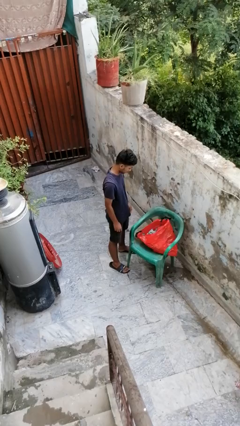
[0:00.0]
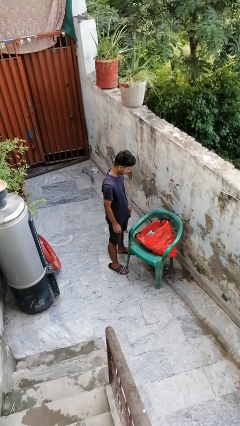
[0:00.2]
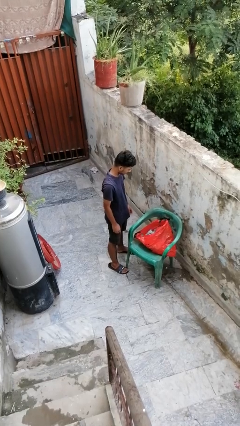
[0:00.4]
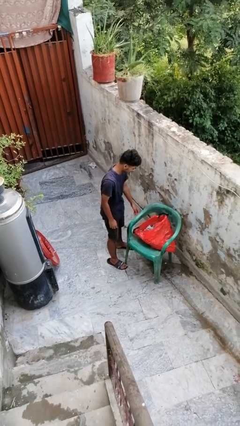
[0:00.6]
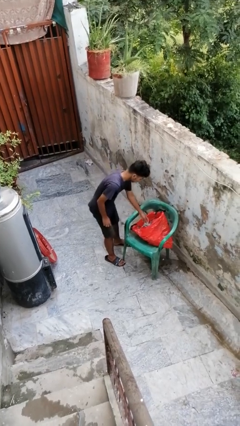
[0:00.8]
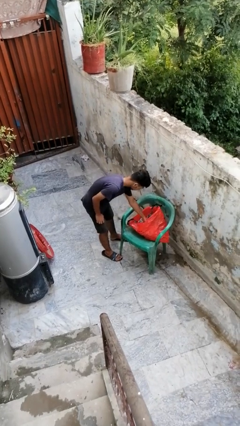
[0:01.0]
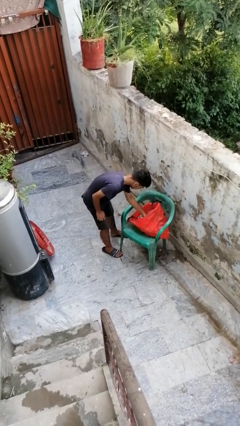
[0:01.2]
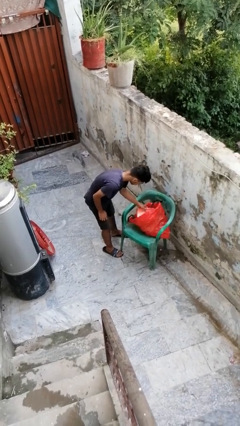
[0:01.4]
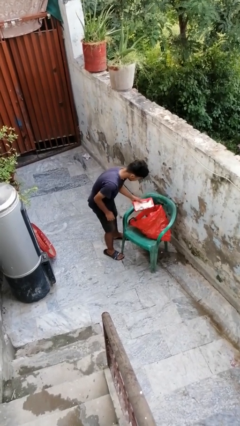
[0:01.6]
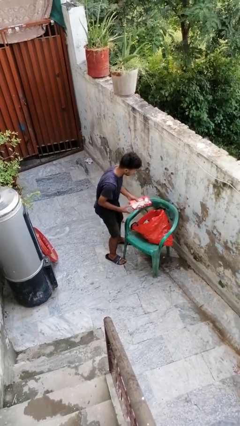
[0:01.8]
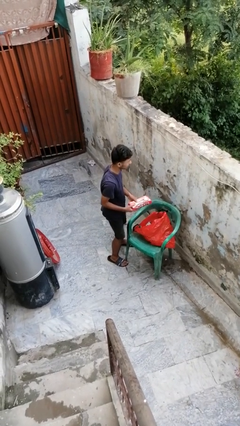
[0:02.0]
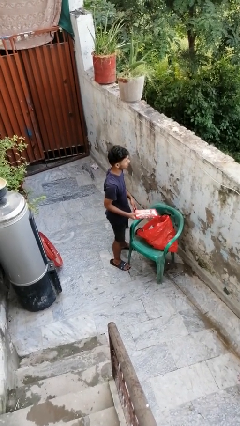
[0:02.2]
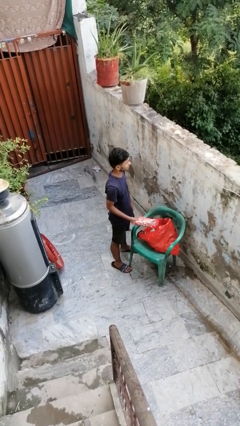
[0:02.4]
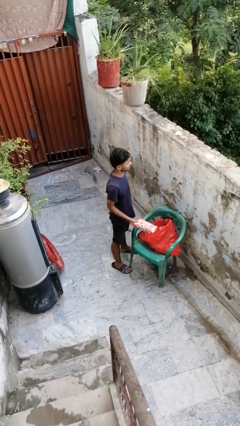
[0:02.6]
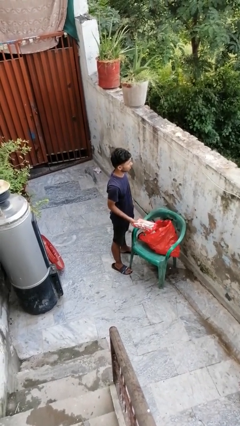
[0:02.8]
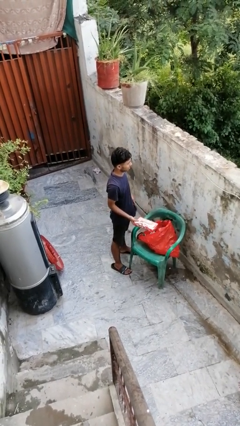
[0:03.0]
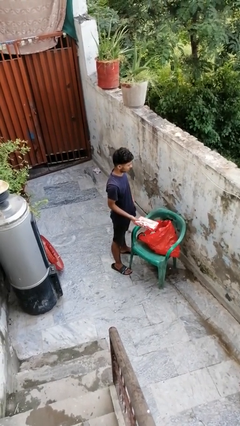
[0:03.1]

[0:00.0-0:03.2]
person takes object from bag

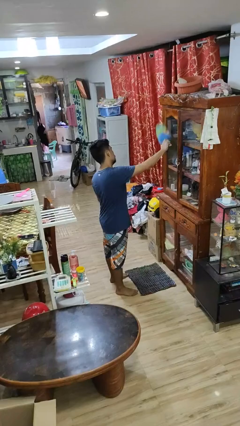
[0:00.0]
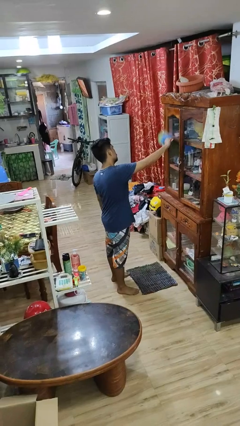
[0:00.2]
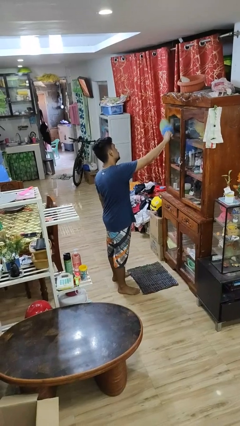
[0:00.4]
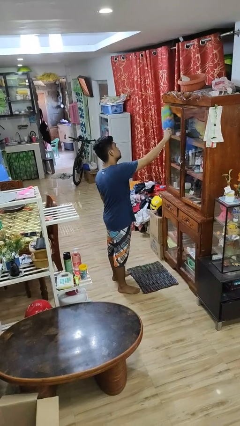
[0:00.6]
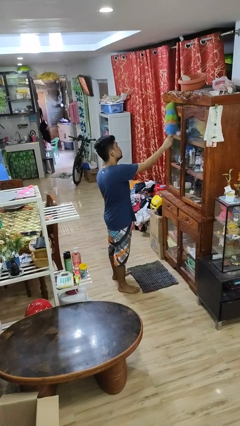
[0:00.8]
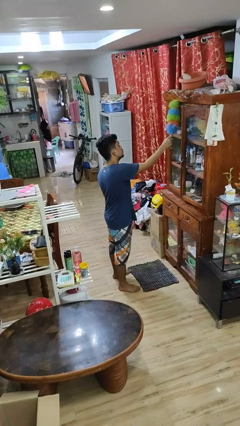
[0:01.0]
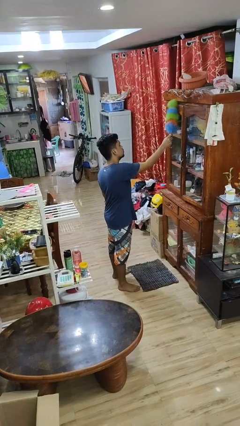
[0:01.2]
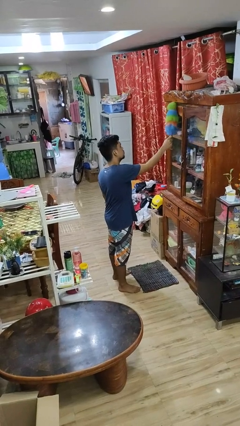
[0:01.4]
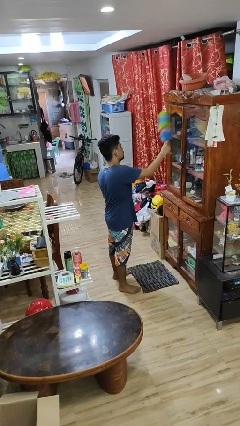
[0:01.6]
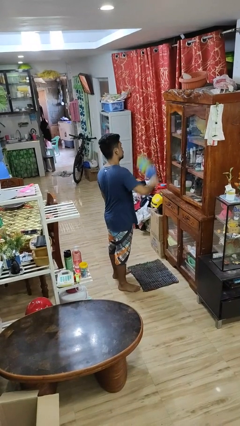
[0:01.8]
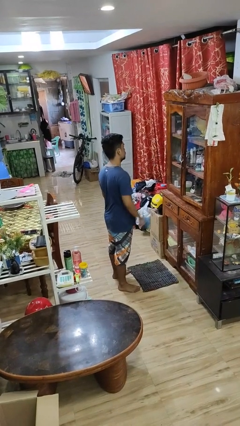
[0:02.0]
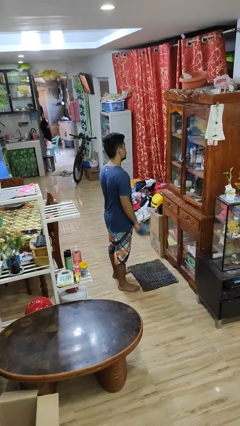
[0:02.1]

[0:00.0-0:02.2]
person dusts furniture

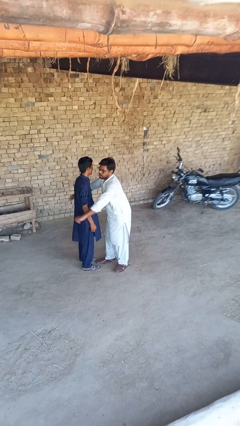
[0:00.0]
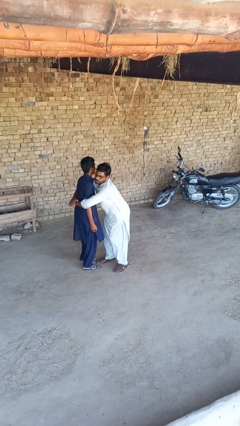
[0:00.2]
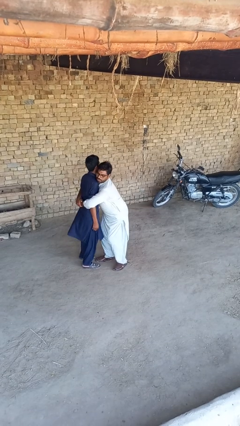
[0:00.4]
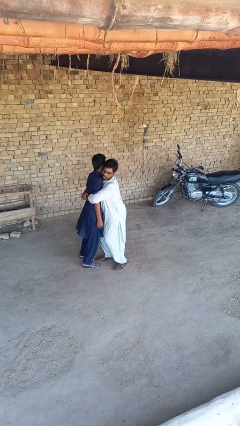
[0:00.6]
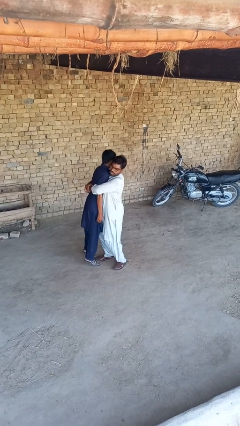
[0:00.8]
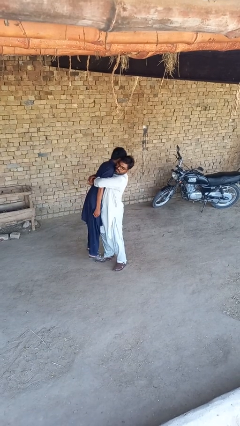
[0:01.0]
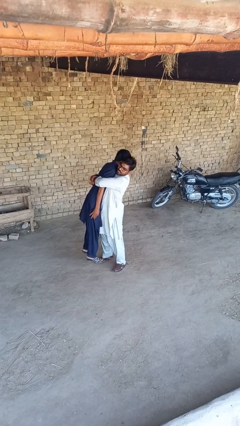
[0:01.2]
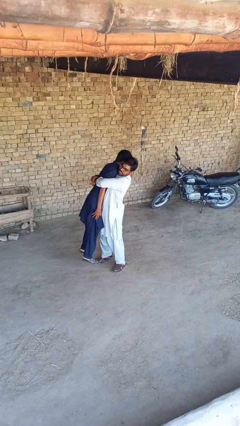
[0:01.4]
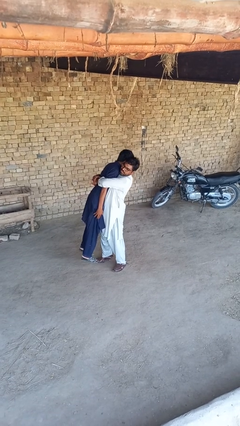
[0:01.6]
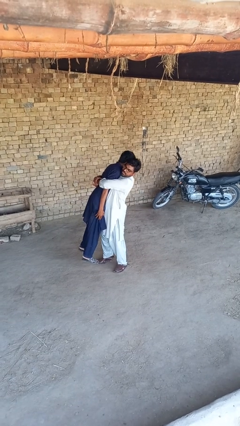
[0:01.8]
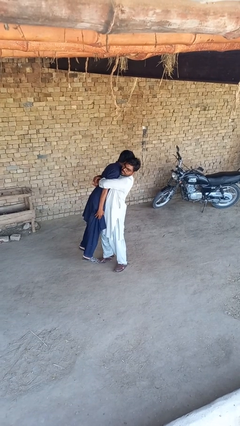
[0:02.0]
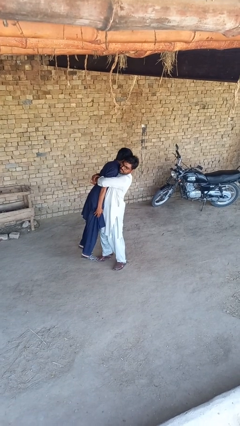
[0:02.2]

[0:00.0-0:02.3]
person picks up person

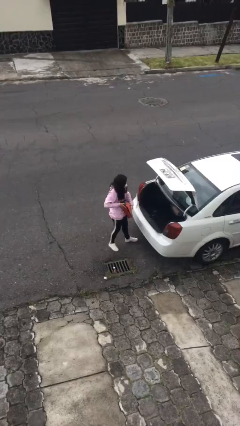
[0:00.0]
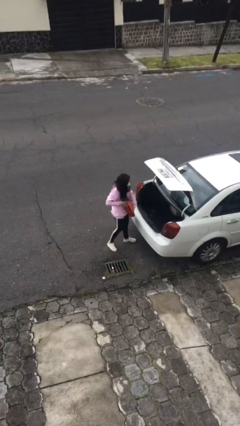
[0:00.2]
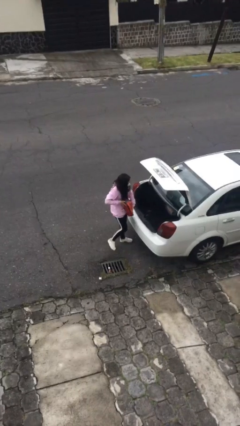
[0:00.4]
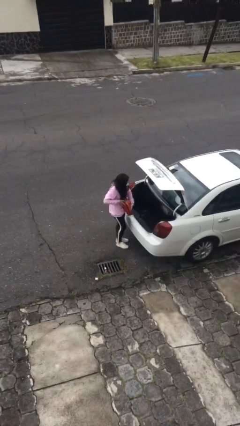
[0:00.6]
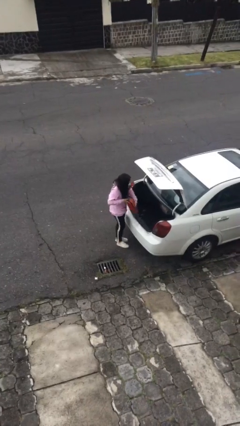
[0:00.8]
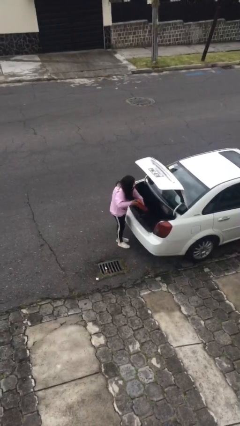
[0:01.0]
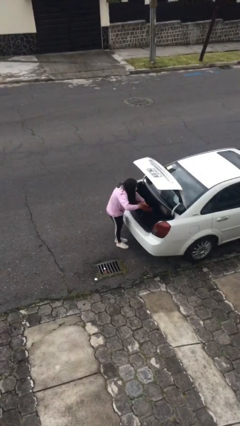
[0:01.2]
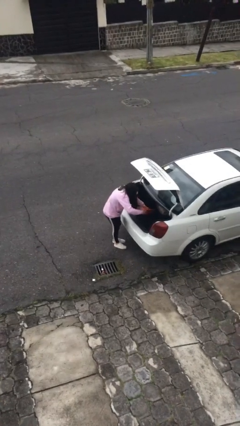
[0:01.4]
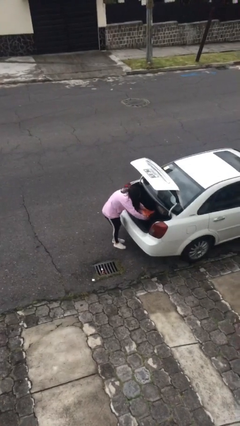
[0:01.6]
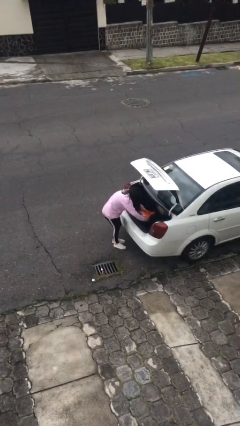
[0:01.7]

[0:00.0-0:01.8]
person loads car

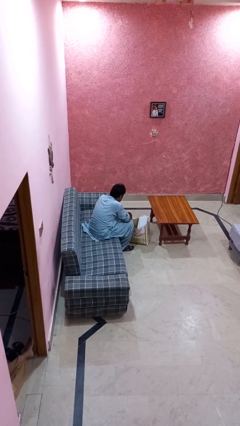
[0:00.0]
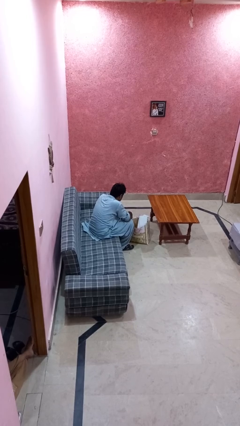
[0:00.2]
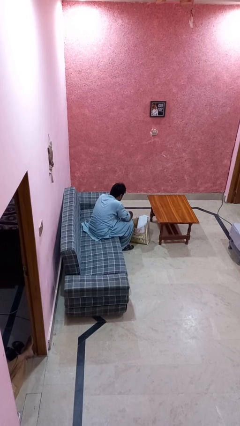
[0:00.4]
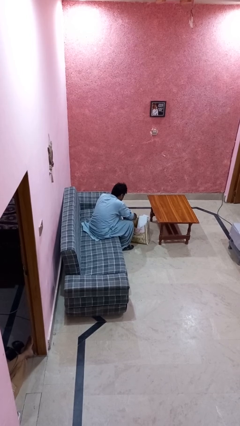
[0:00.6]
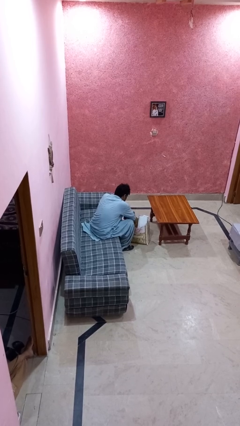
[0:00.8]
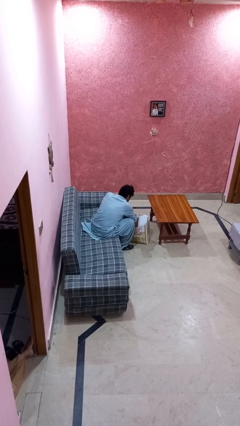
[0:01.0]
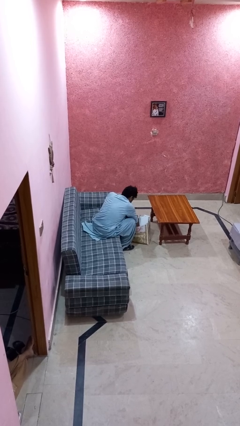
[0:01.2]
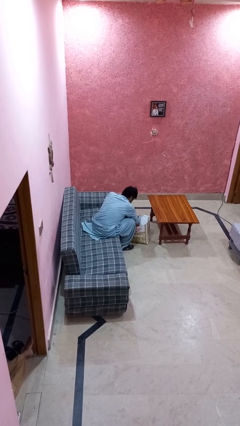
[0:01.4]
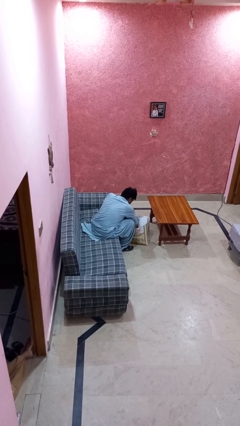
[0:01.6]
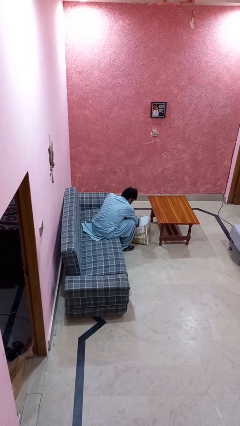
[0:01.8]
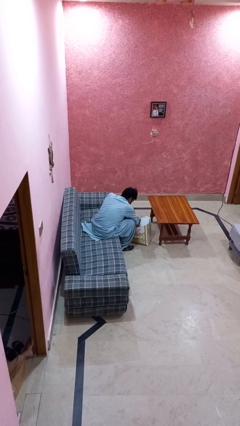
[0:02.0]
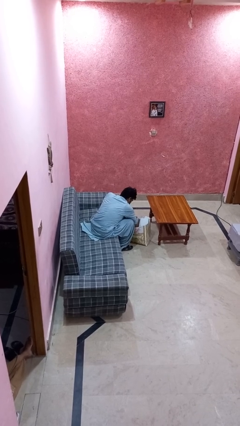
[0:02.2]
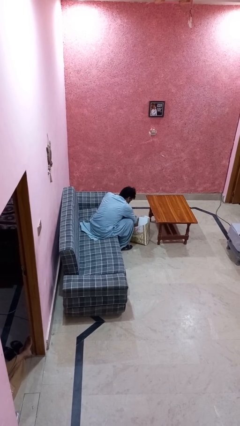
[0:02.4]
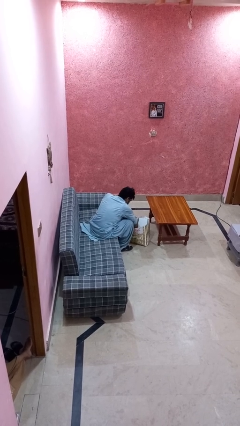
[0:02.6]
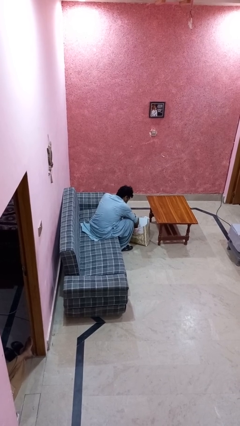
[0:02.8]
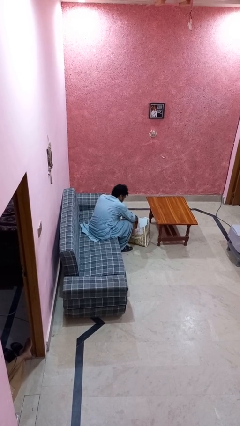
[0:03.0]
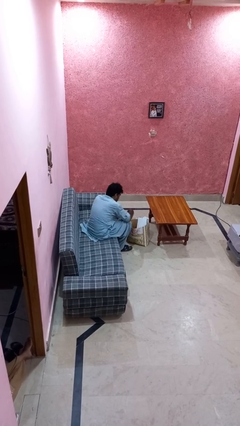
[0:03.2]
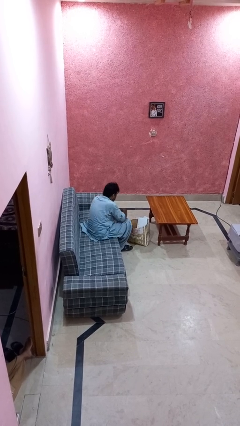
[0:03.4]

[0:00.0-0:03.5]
person searches in bag

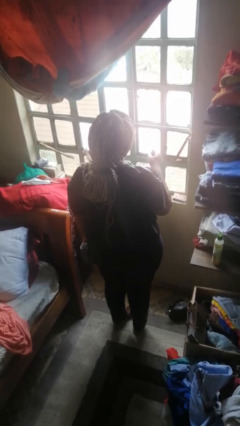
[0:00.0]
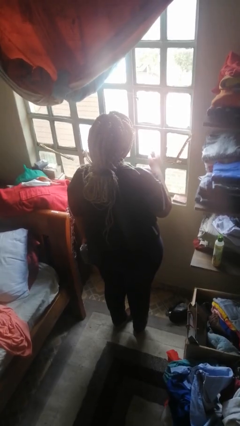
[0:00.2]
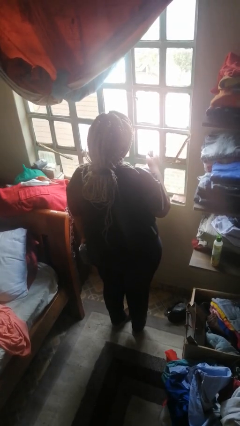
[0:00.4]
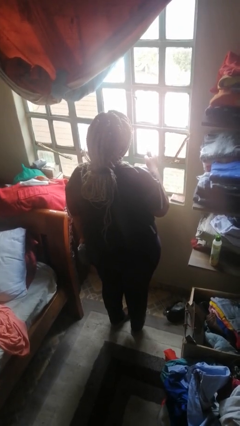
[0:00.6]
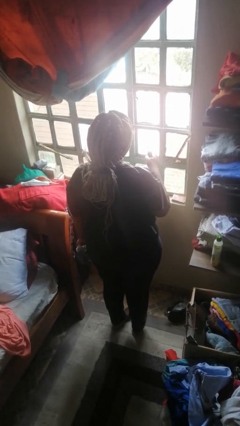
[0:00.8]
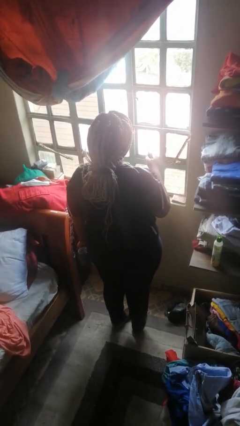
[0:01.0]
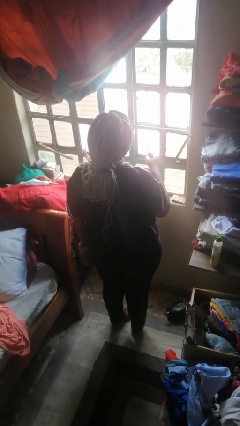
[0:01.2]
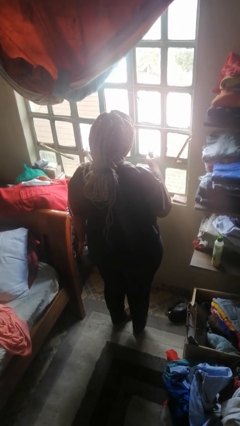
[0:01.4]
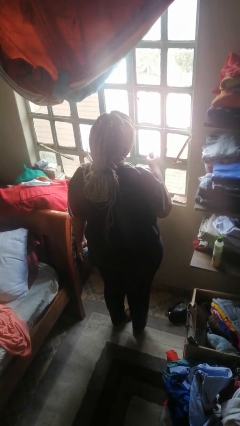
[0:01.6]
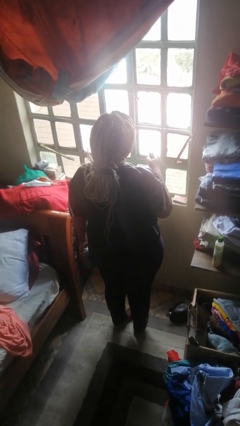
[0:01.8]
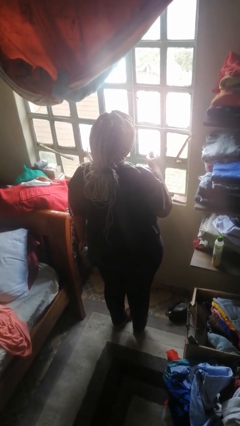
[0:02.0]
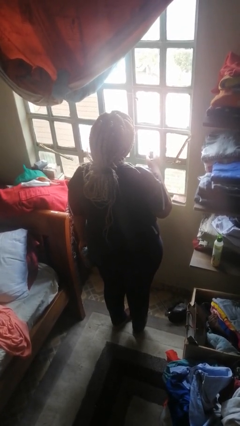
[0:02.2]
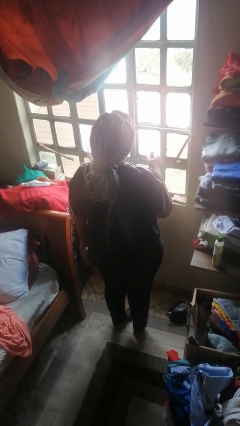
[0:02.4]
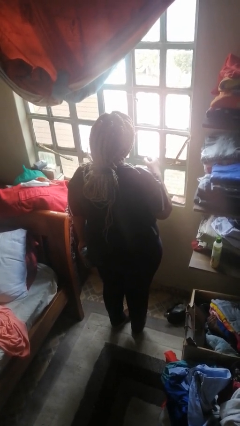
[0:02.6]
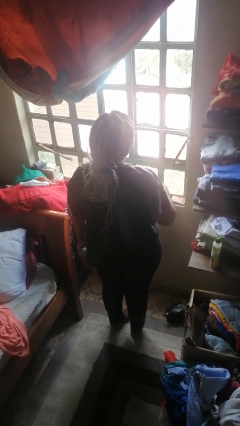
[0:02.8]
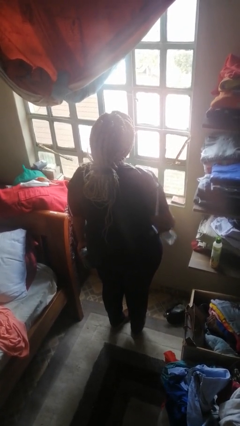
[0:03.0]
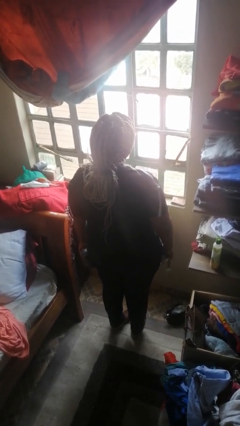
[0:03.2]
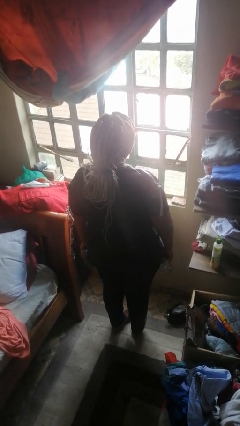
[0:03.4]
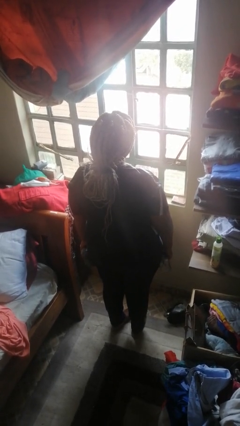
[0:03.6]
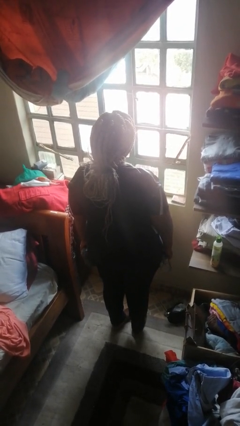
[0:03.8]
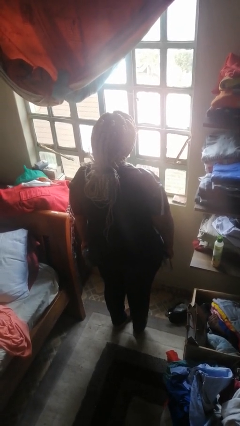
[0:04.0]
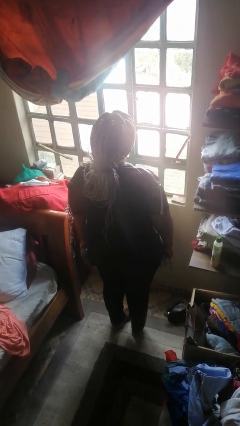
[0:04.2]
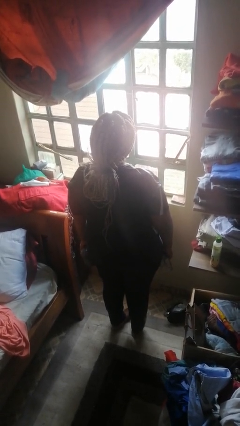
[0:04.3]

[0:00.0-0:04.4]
person sprays from bottle

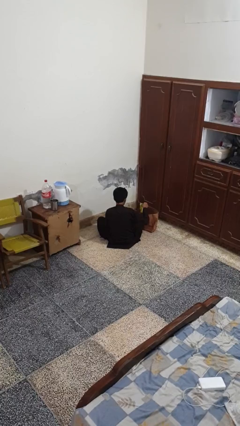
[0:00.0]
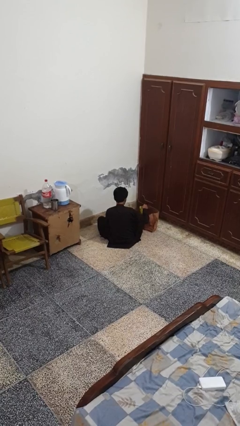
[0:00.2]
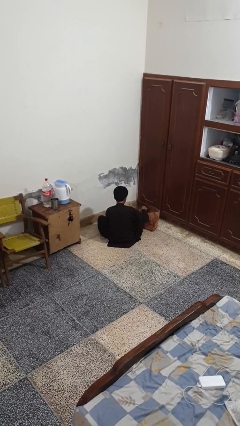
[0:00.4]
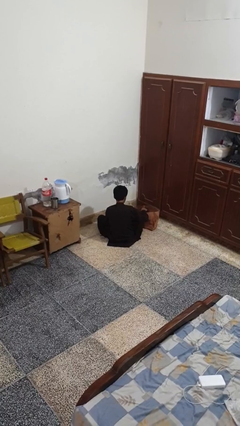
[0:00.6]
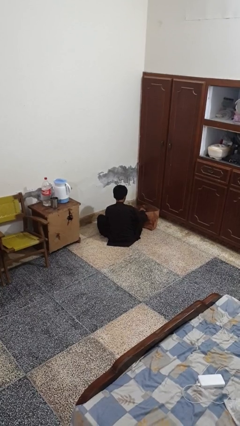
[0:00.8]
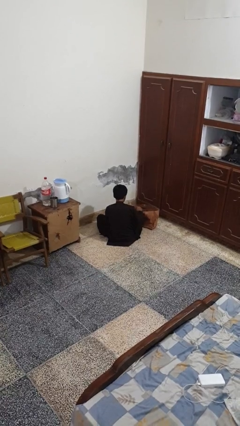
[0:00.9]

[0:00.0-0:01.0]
person puts object into bag
